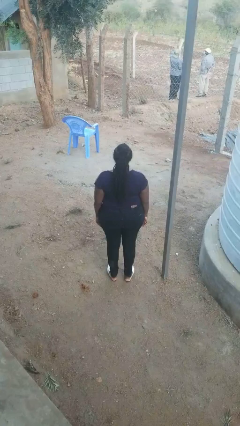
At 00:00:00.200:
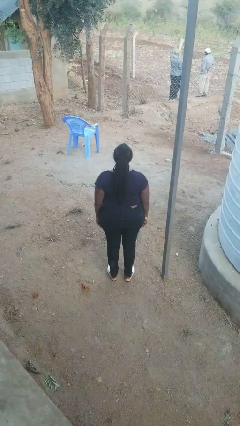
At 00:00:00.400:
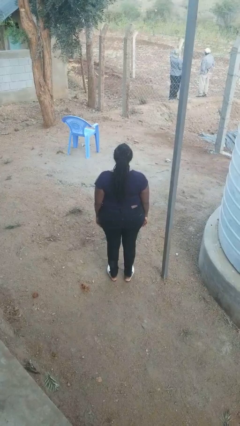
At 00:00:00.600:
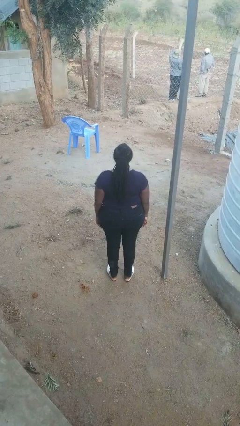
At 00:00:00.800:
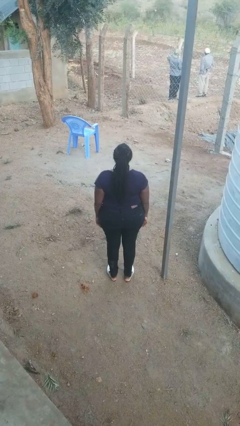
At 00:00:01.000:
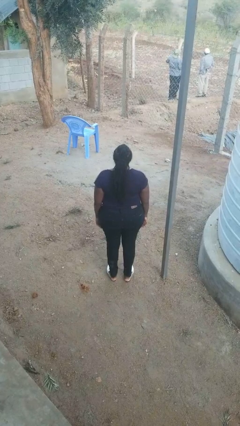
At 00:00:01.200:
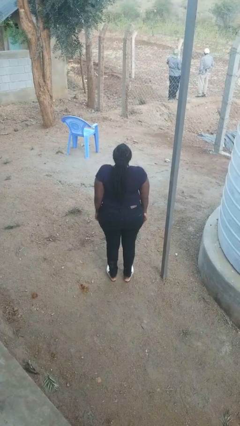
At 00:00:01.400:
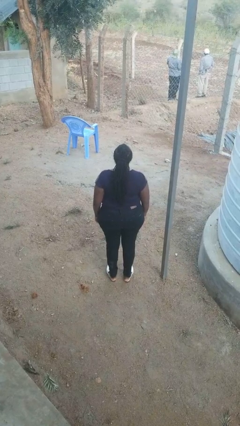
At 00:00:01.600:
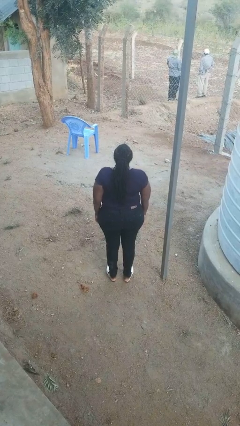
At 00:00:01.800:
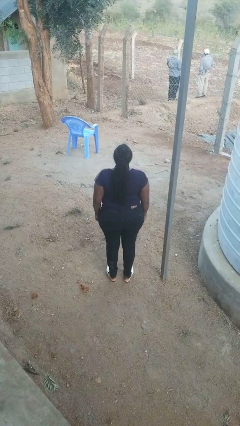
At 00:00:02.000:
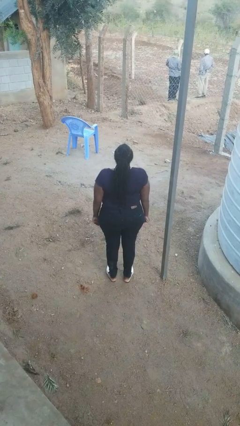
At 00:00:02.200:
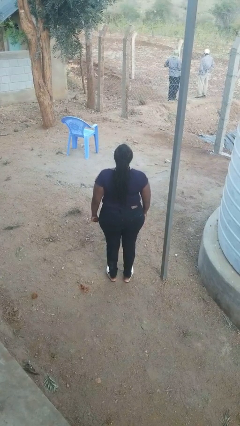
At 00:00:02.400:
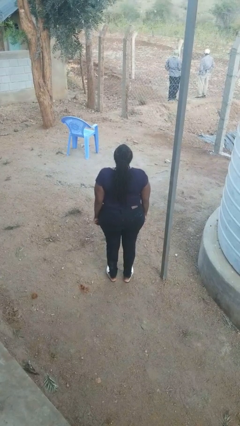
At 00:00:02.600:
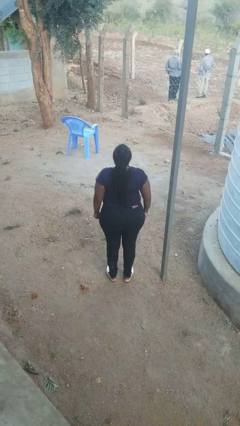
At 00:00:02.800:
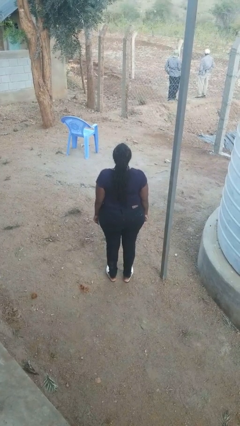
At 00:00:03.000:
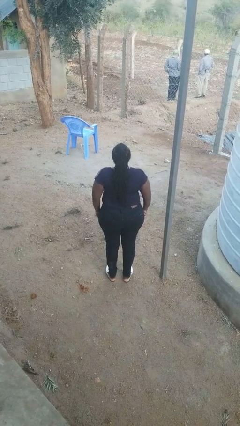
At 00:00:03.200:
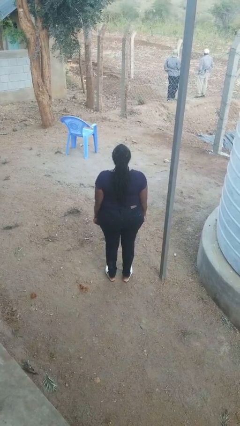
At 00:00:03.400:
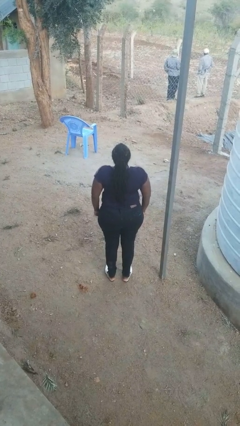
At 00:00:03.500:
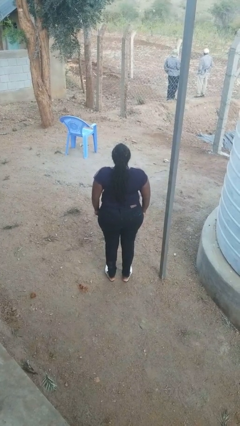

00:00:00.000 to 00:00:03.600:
person shrugs

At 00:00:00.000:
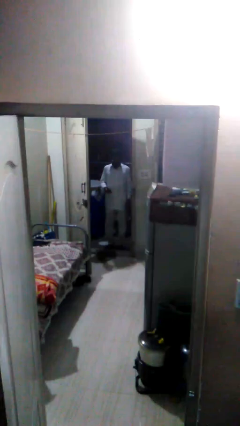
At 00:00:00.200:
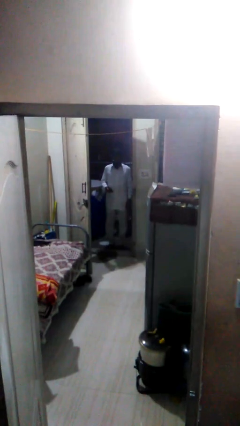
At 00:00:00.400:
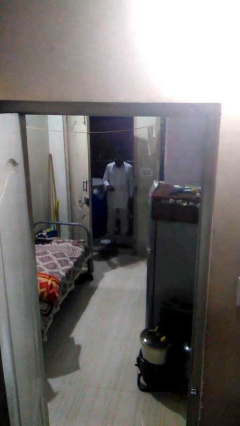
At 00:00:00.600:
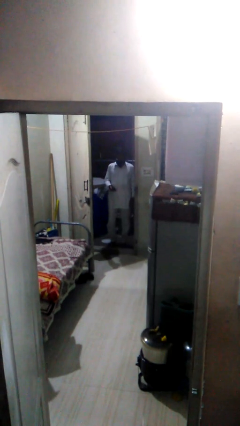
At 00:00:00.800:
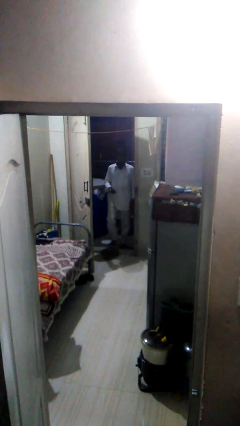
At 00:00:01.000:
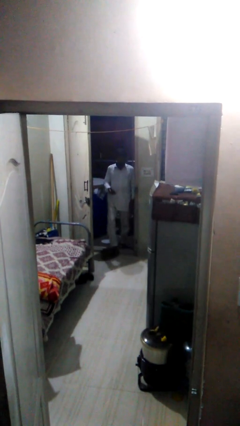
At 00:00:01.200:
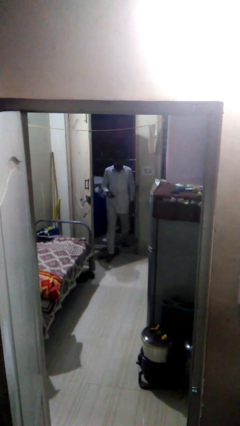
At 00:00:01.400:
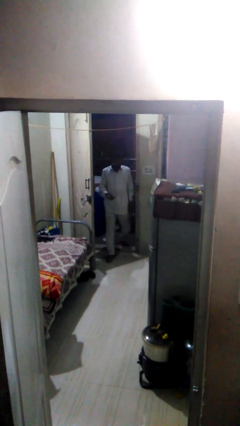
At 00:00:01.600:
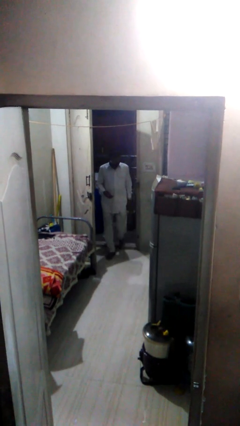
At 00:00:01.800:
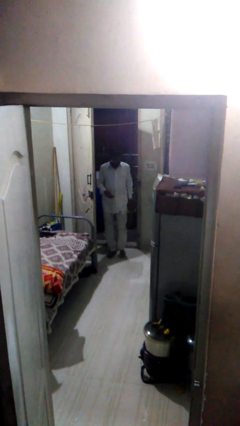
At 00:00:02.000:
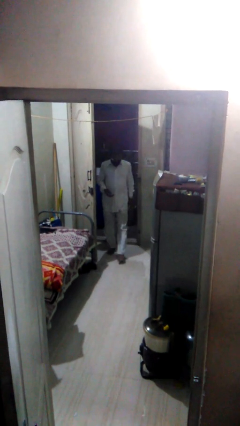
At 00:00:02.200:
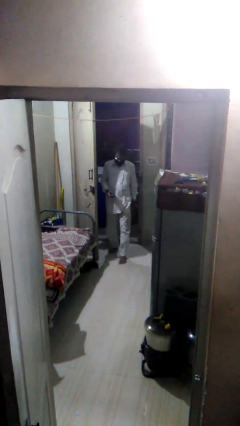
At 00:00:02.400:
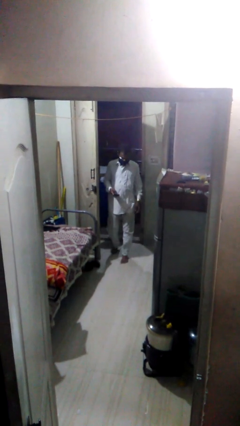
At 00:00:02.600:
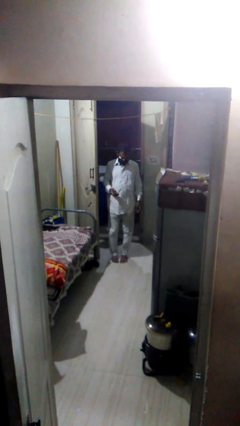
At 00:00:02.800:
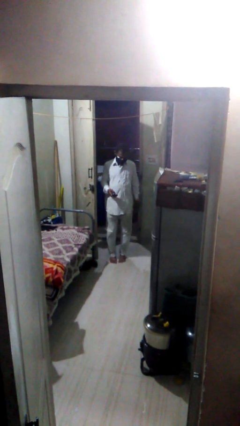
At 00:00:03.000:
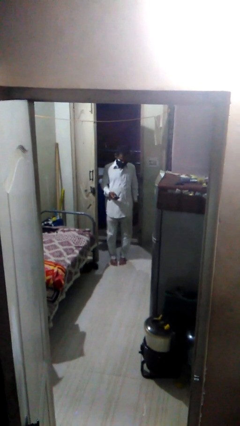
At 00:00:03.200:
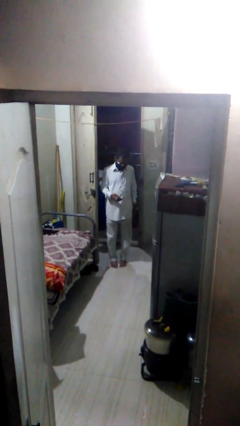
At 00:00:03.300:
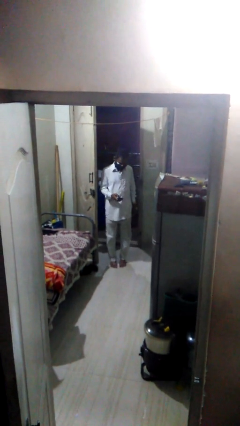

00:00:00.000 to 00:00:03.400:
person enters scene through structure

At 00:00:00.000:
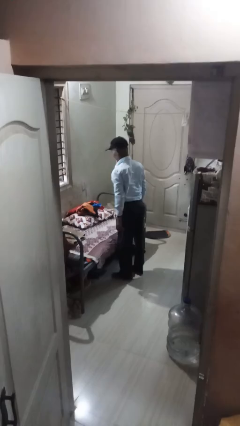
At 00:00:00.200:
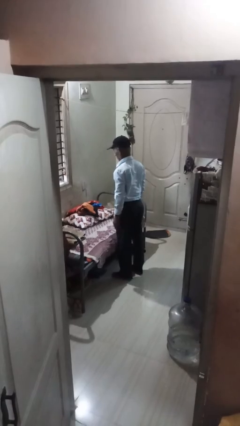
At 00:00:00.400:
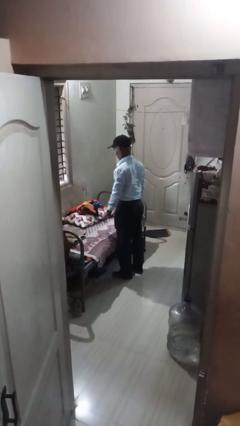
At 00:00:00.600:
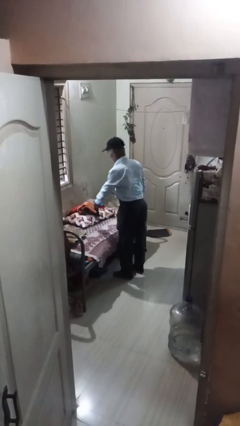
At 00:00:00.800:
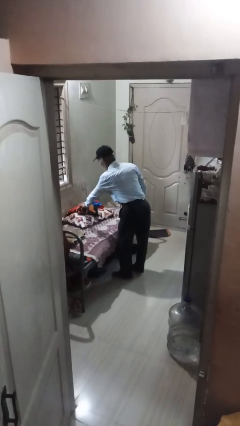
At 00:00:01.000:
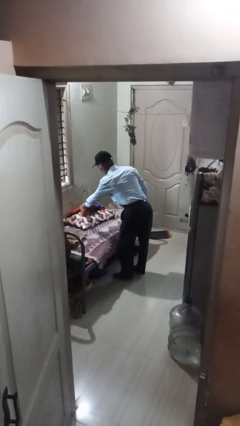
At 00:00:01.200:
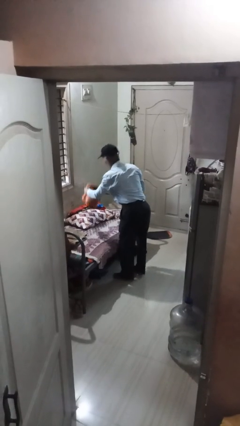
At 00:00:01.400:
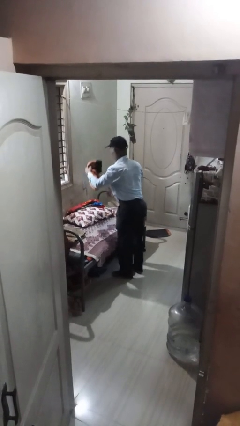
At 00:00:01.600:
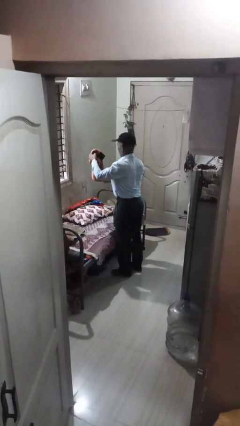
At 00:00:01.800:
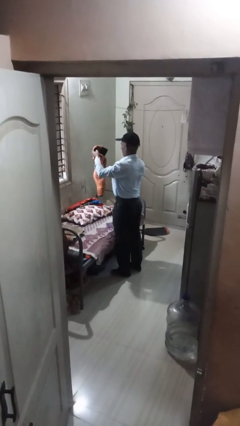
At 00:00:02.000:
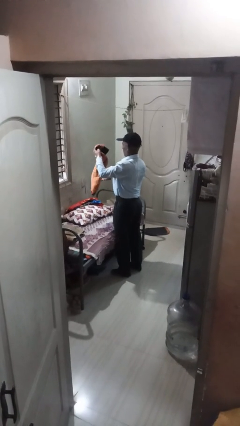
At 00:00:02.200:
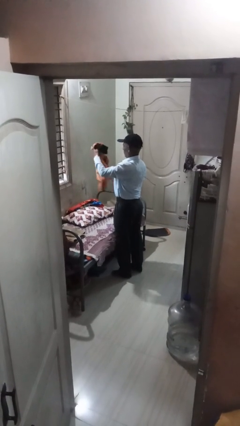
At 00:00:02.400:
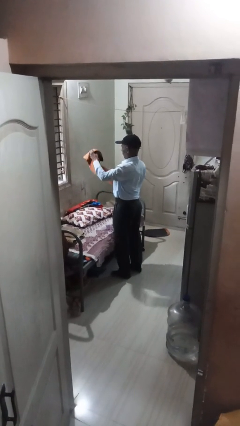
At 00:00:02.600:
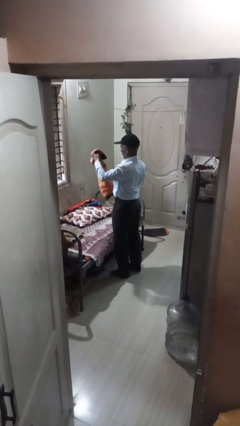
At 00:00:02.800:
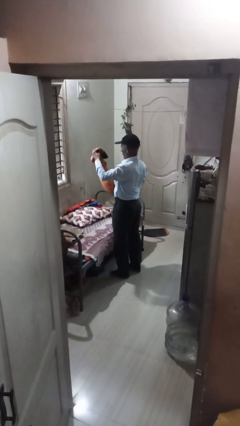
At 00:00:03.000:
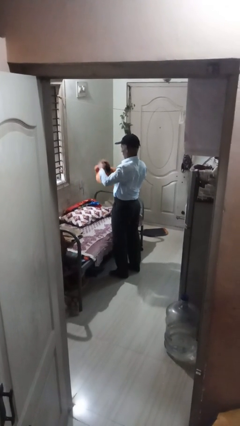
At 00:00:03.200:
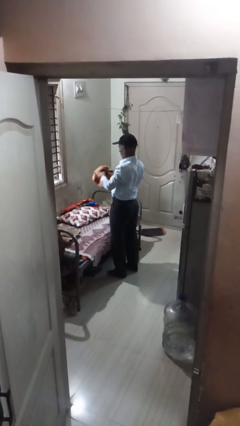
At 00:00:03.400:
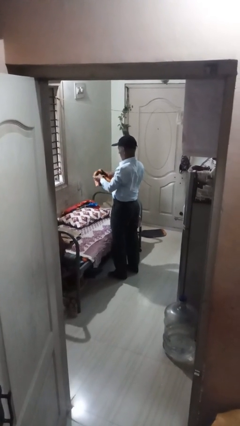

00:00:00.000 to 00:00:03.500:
person folds shirt

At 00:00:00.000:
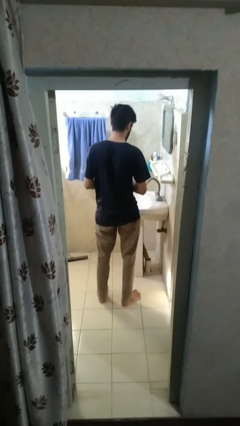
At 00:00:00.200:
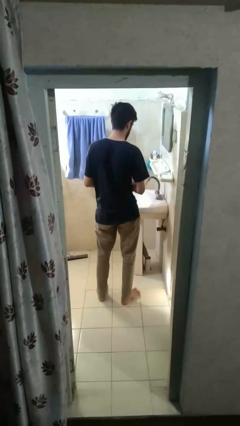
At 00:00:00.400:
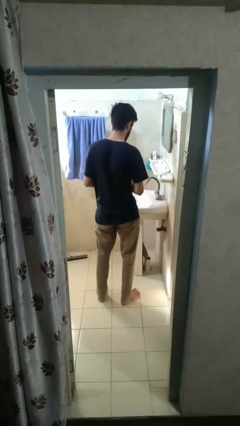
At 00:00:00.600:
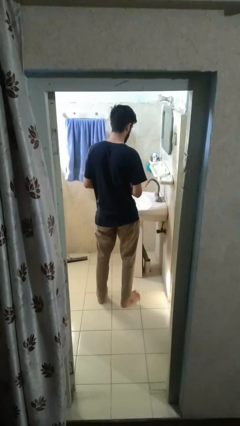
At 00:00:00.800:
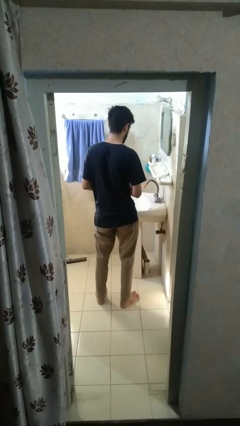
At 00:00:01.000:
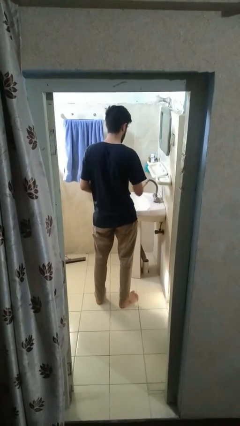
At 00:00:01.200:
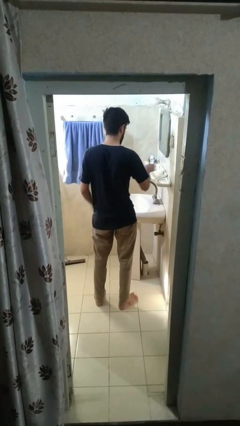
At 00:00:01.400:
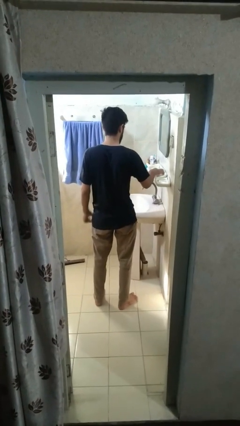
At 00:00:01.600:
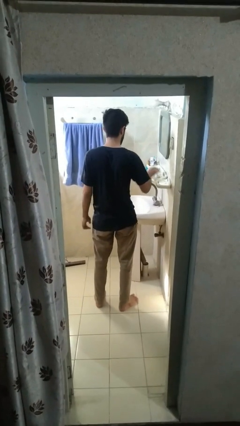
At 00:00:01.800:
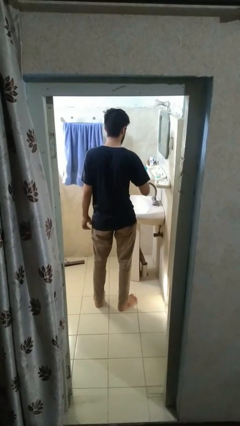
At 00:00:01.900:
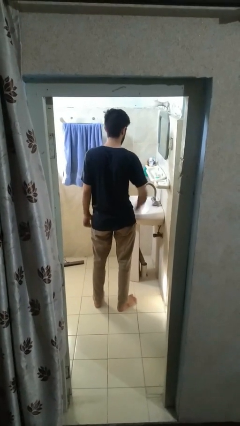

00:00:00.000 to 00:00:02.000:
person puts down object on countertop

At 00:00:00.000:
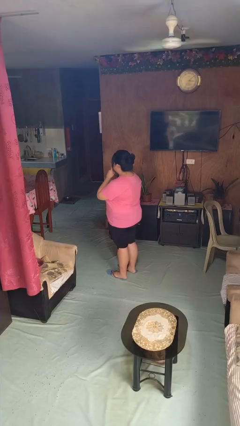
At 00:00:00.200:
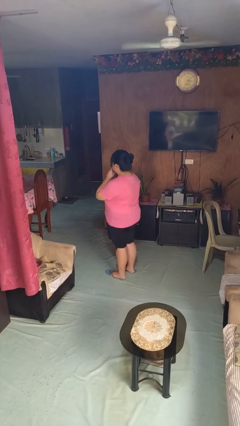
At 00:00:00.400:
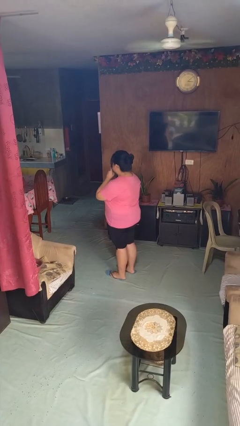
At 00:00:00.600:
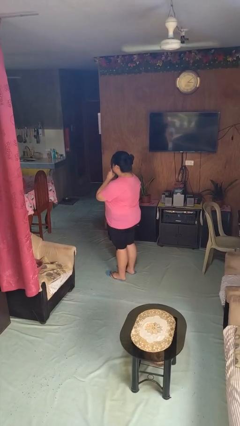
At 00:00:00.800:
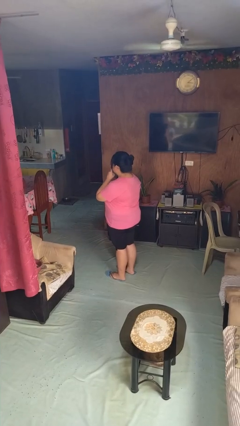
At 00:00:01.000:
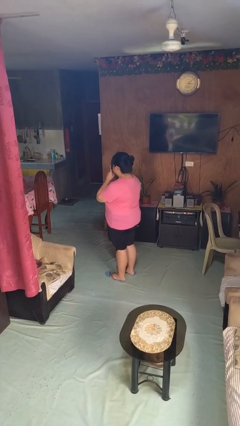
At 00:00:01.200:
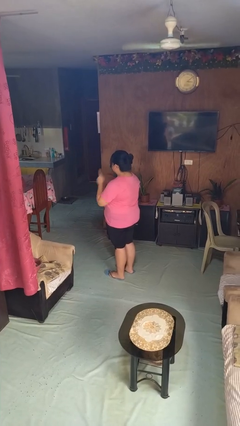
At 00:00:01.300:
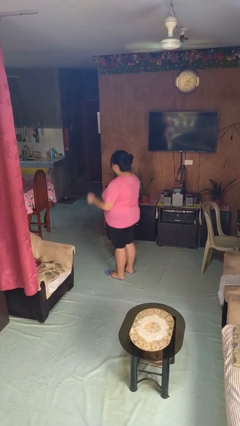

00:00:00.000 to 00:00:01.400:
person gestures be quiet

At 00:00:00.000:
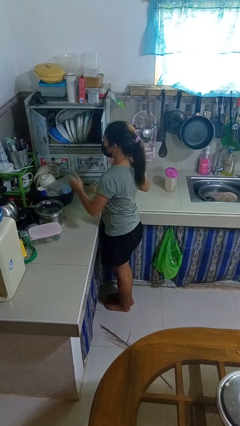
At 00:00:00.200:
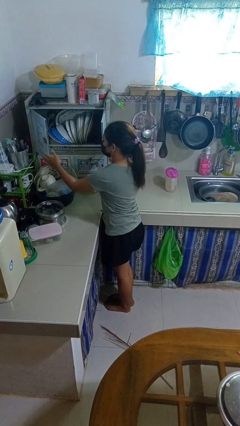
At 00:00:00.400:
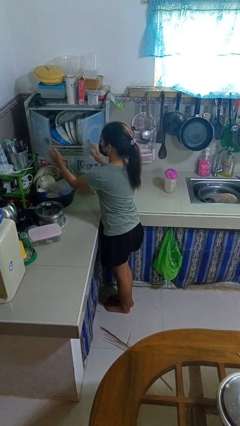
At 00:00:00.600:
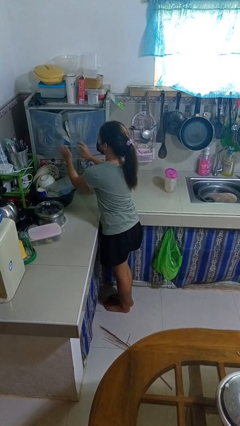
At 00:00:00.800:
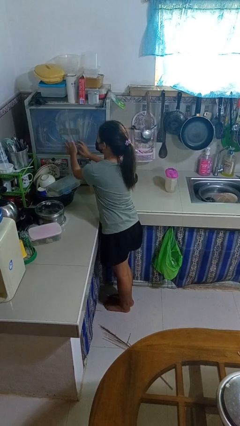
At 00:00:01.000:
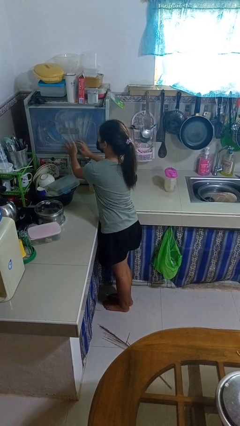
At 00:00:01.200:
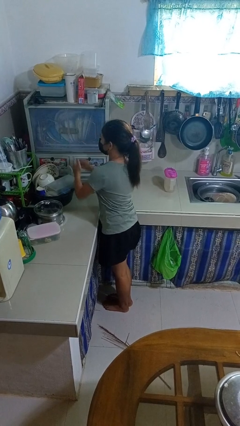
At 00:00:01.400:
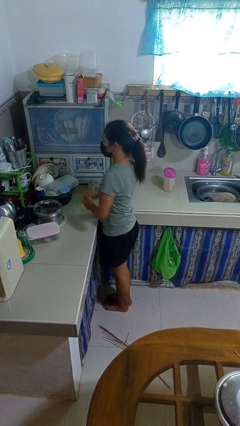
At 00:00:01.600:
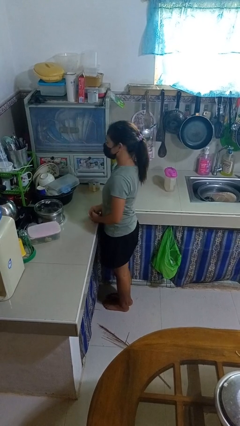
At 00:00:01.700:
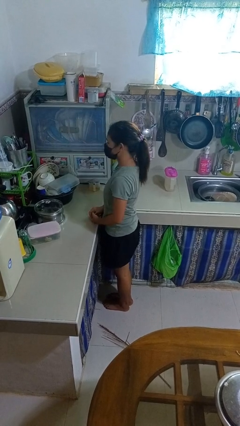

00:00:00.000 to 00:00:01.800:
person closes kitchen drawer

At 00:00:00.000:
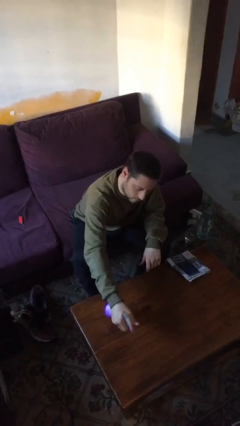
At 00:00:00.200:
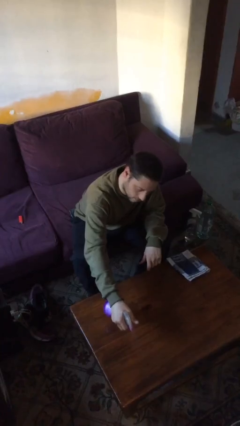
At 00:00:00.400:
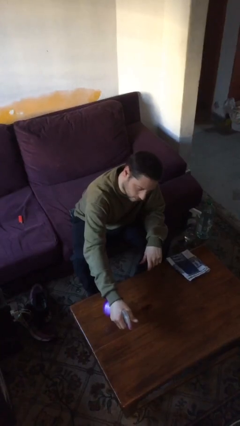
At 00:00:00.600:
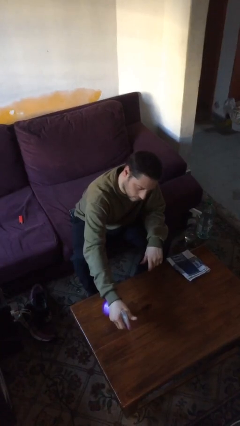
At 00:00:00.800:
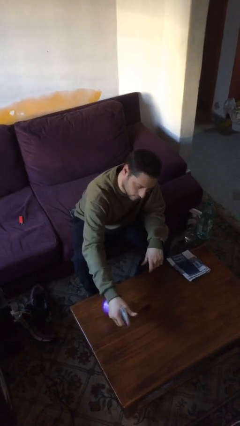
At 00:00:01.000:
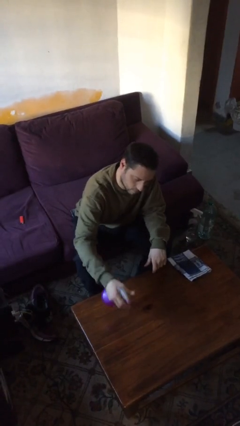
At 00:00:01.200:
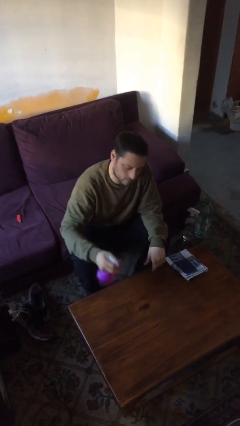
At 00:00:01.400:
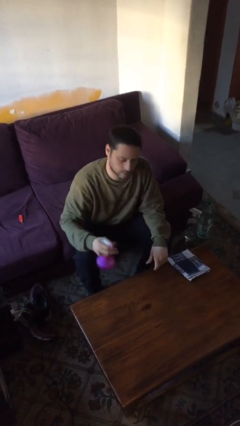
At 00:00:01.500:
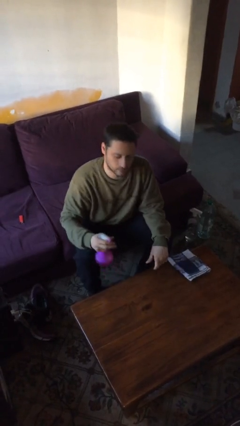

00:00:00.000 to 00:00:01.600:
person sprays from bottle
